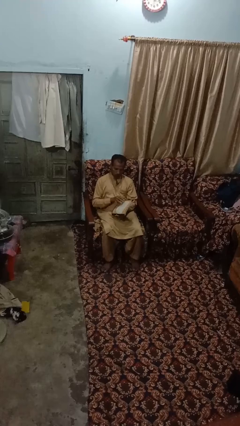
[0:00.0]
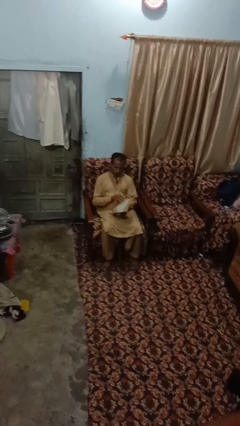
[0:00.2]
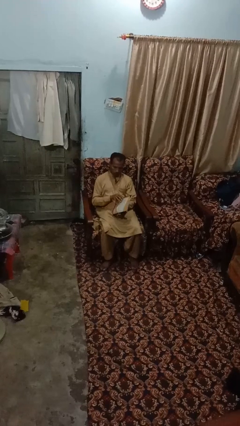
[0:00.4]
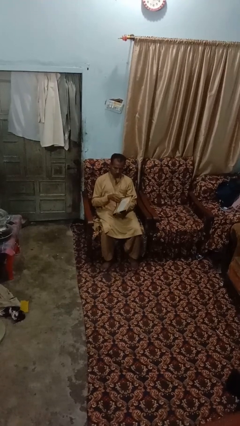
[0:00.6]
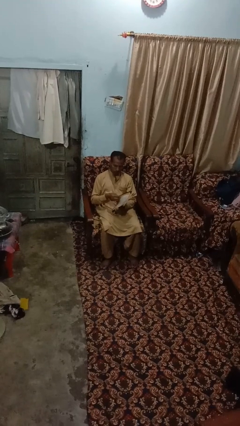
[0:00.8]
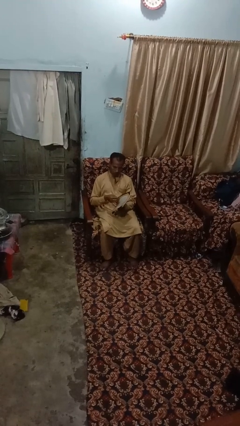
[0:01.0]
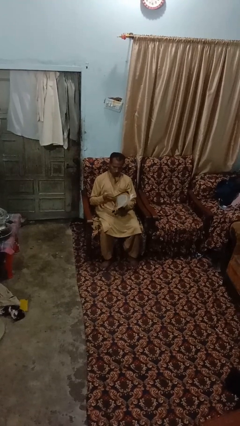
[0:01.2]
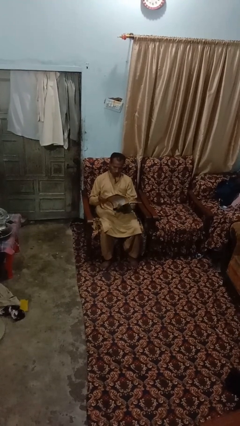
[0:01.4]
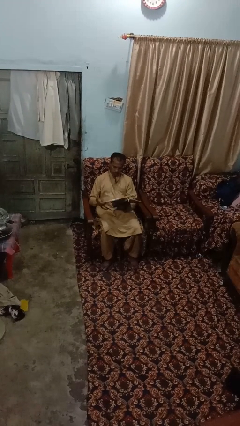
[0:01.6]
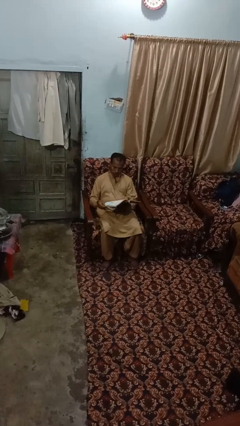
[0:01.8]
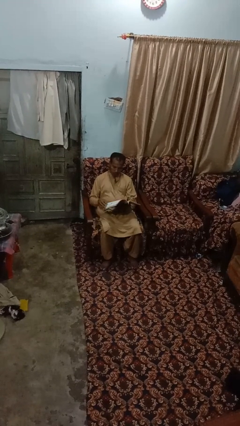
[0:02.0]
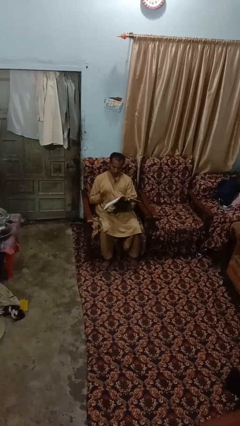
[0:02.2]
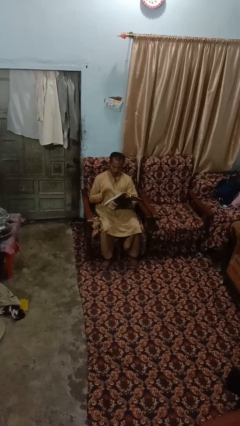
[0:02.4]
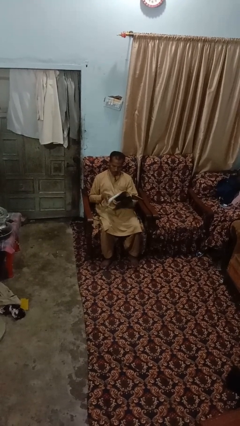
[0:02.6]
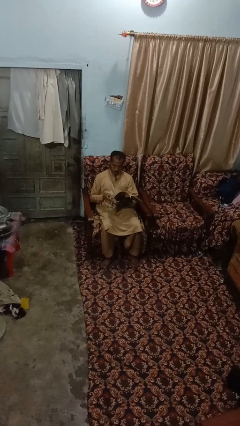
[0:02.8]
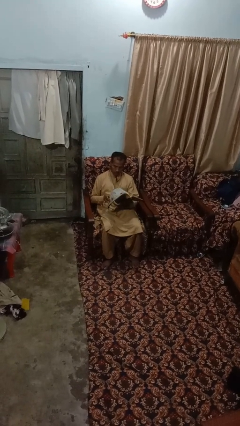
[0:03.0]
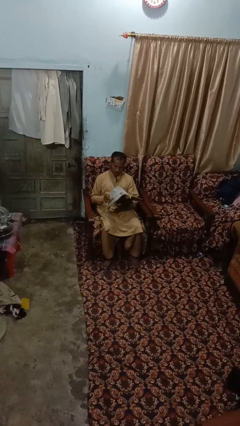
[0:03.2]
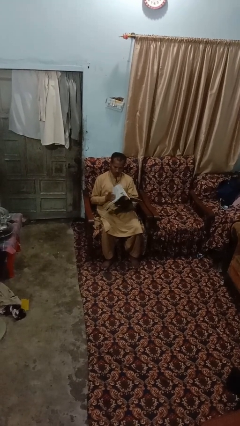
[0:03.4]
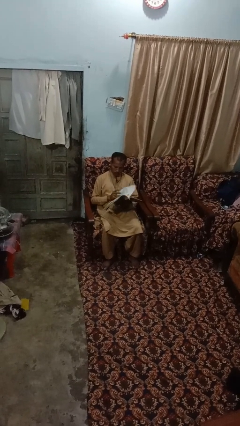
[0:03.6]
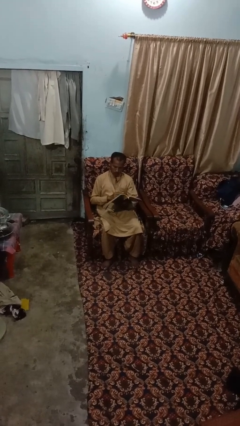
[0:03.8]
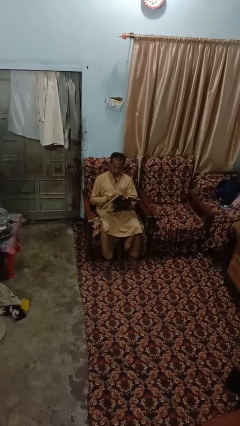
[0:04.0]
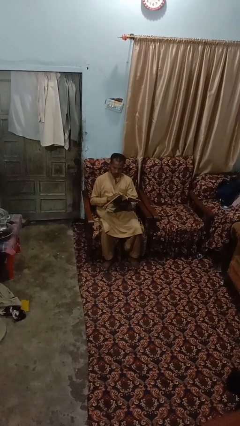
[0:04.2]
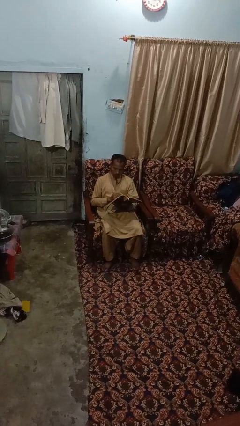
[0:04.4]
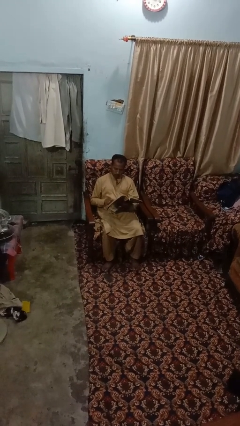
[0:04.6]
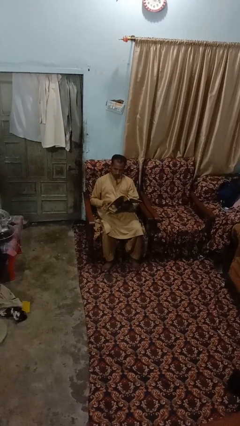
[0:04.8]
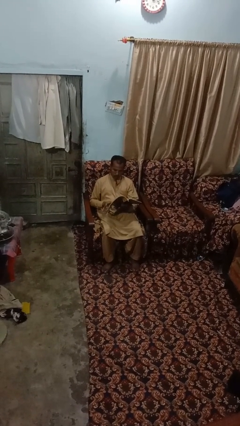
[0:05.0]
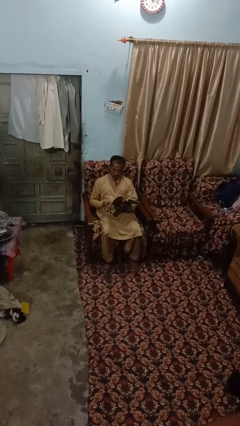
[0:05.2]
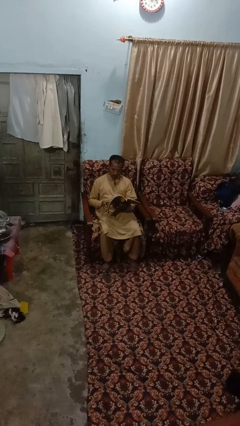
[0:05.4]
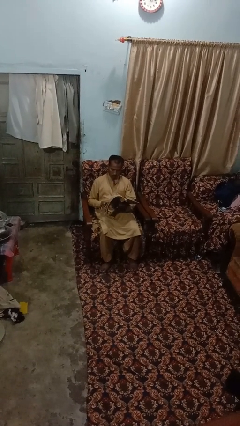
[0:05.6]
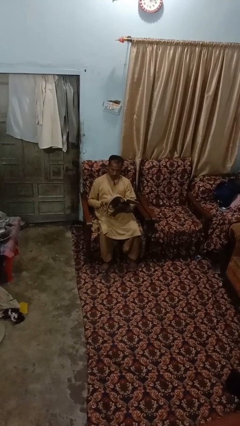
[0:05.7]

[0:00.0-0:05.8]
person reads book

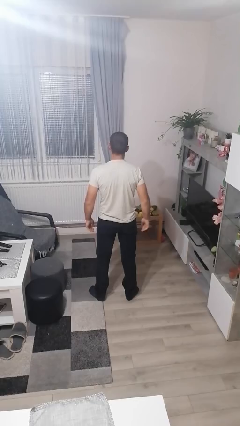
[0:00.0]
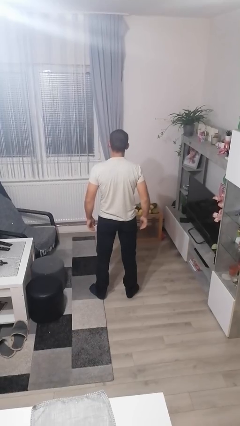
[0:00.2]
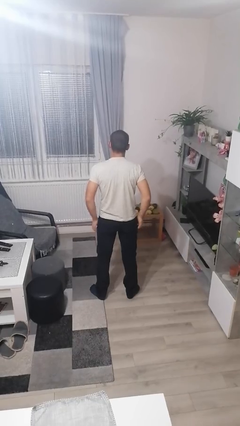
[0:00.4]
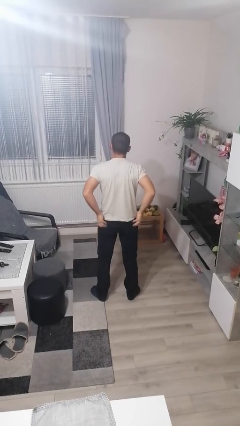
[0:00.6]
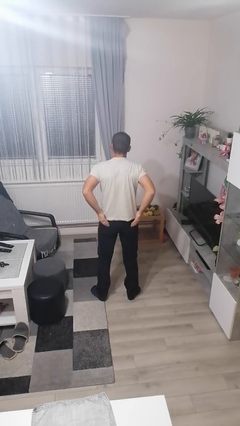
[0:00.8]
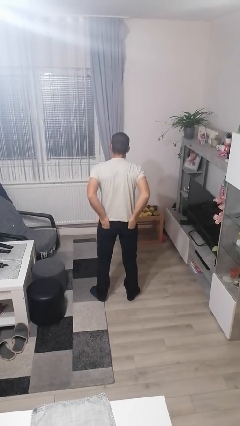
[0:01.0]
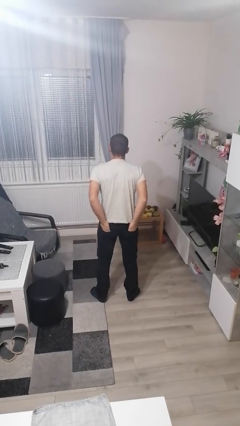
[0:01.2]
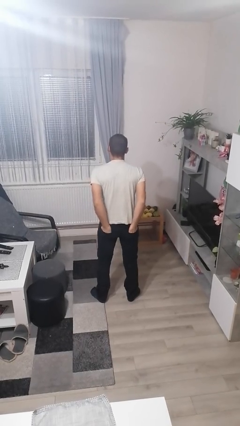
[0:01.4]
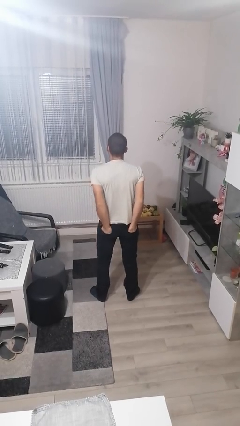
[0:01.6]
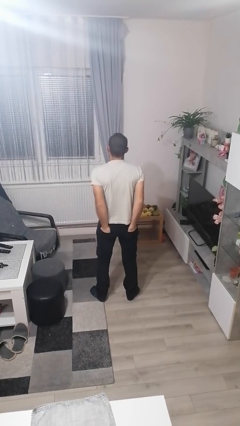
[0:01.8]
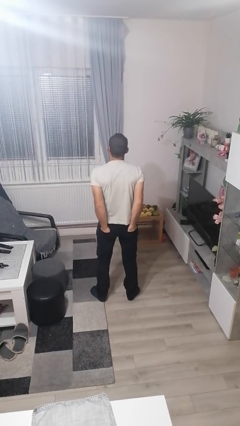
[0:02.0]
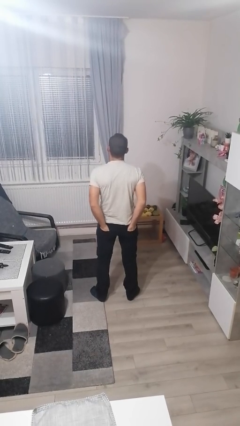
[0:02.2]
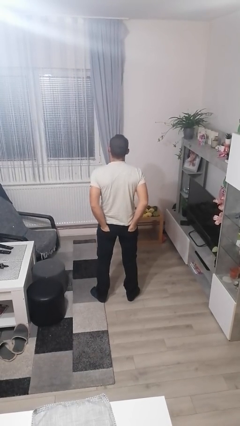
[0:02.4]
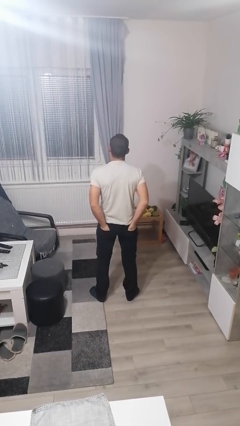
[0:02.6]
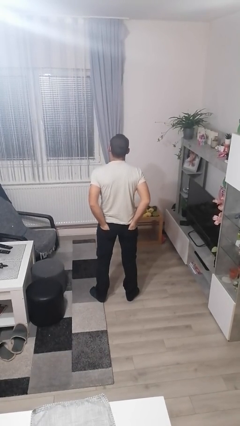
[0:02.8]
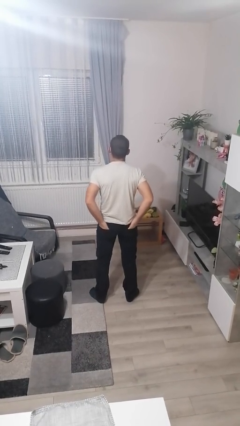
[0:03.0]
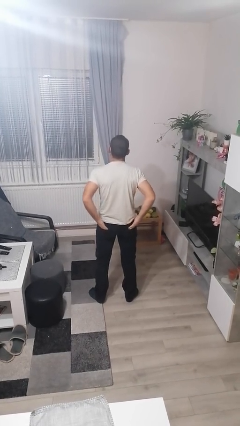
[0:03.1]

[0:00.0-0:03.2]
person puts hands in back pockets

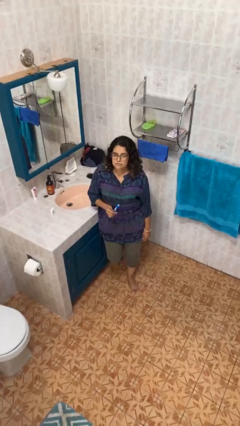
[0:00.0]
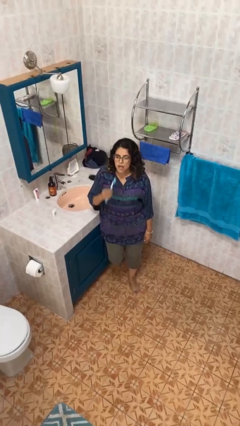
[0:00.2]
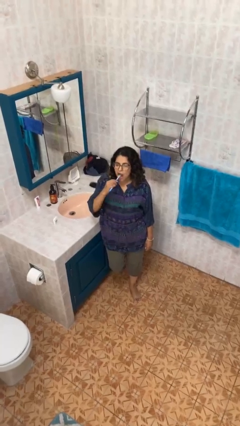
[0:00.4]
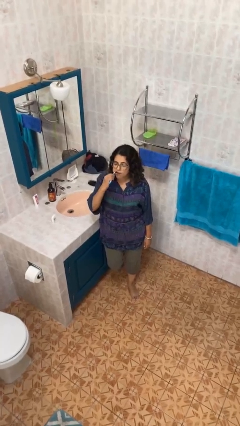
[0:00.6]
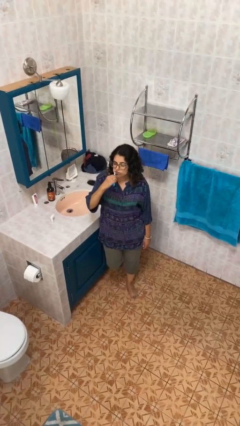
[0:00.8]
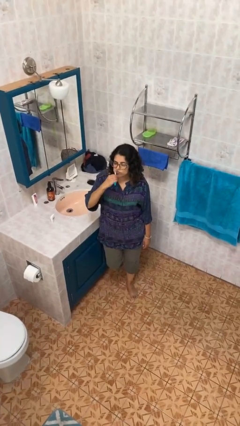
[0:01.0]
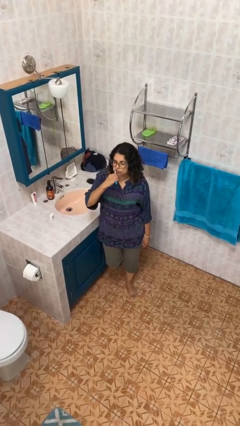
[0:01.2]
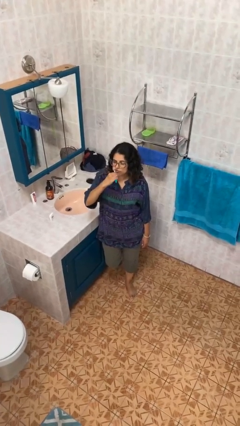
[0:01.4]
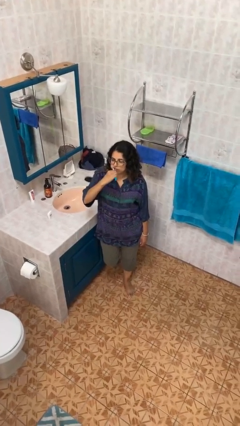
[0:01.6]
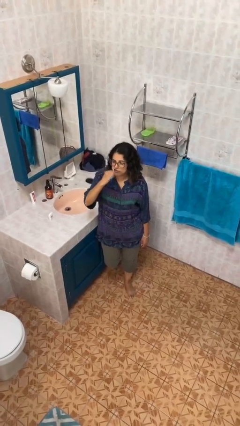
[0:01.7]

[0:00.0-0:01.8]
person brushes teeth

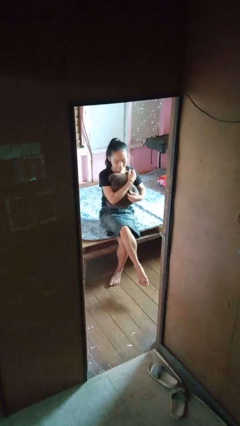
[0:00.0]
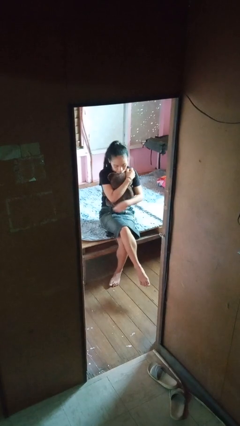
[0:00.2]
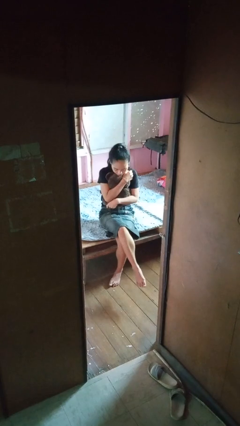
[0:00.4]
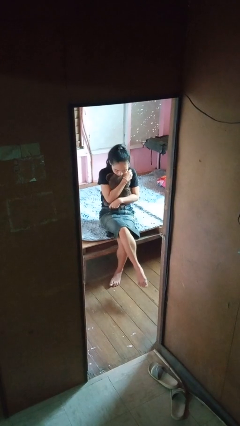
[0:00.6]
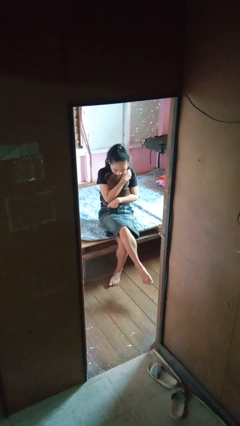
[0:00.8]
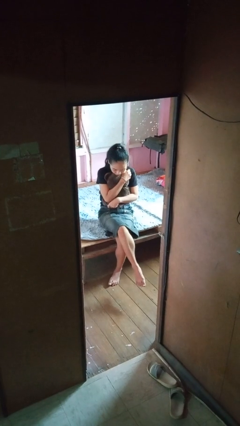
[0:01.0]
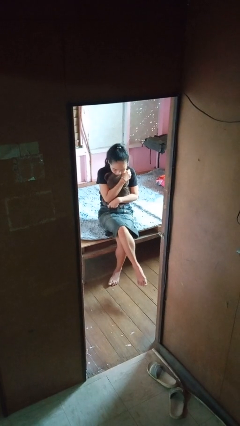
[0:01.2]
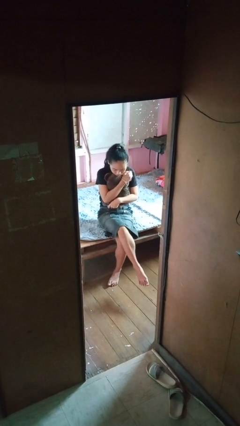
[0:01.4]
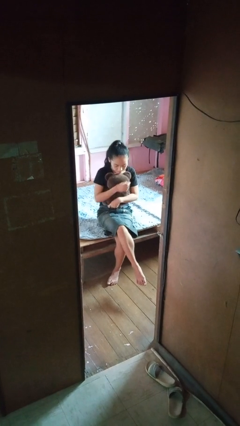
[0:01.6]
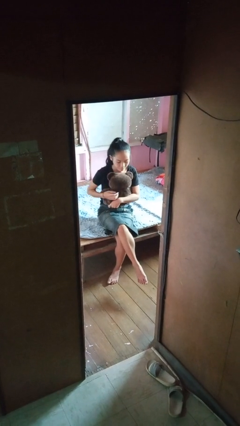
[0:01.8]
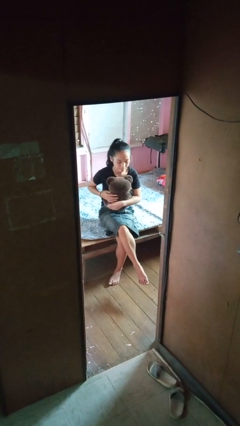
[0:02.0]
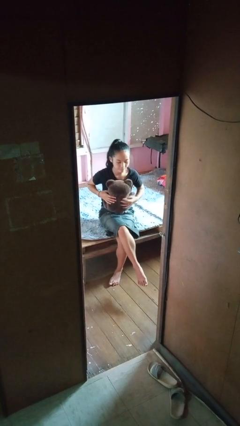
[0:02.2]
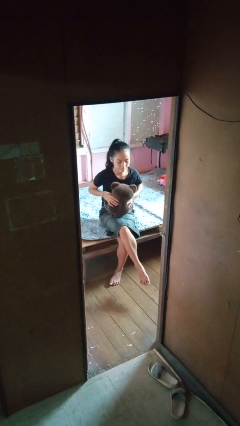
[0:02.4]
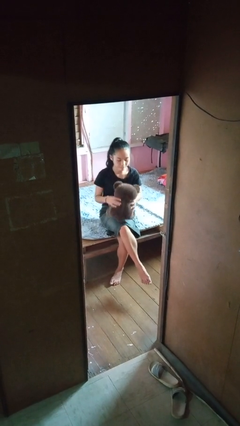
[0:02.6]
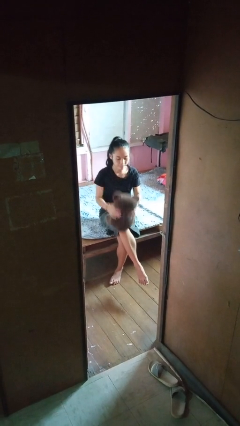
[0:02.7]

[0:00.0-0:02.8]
person hugs stuffed animal

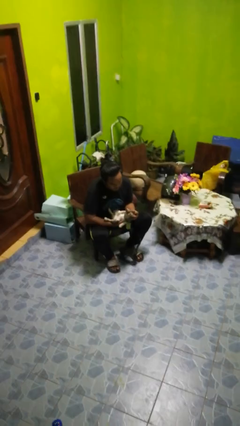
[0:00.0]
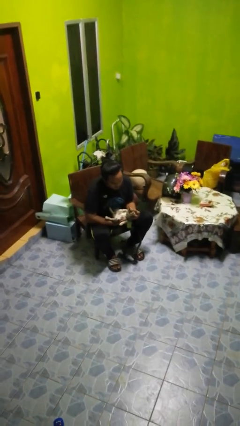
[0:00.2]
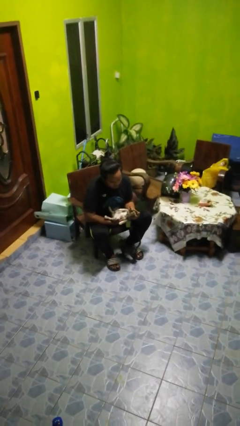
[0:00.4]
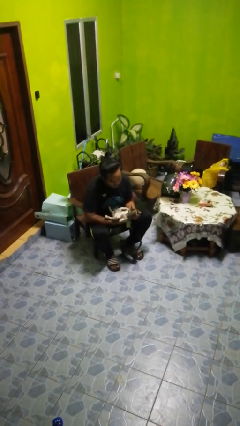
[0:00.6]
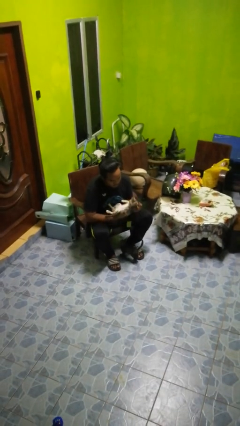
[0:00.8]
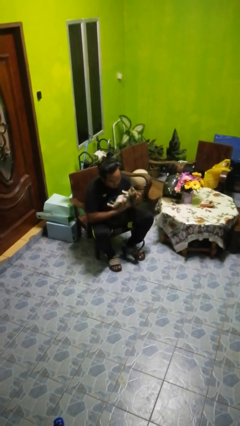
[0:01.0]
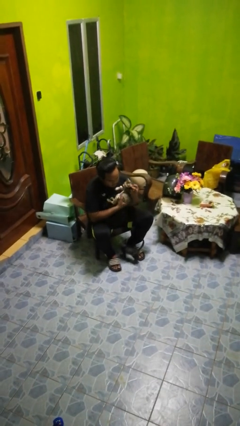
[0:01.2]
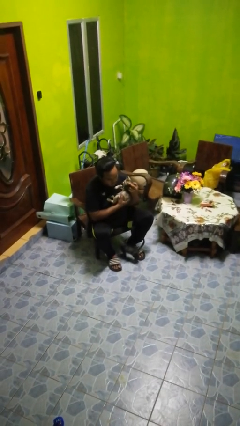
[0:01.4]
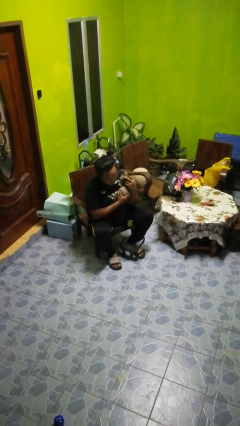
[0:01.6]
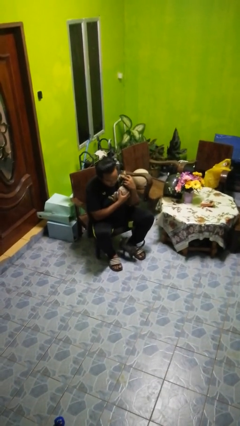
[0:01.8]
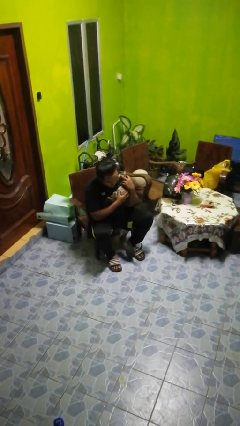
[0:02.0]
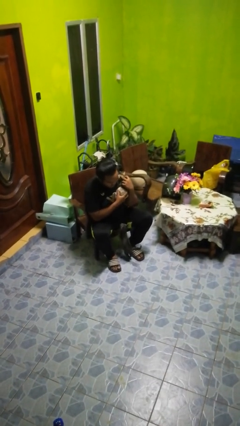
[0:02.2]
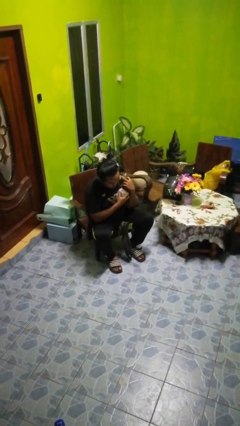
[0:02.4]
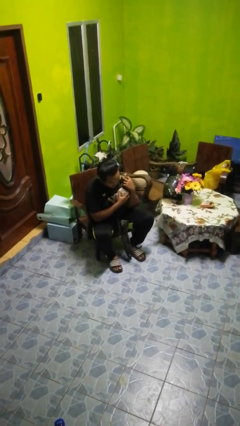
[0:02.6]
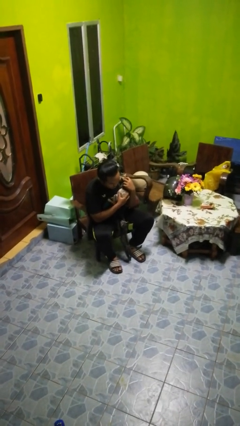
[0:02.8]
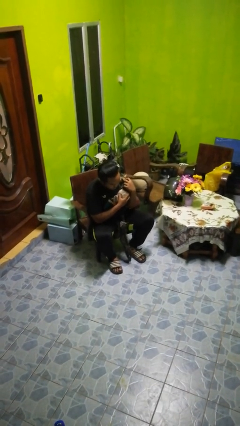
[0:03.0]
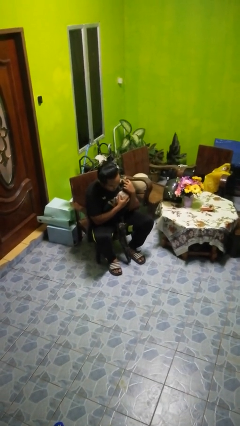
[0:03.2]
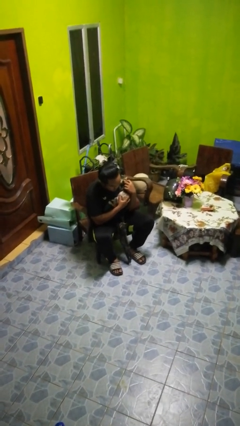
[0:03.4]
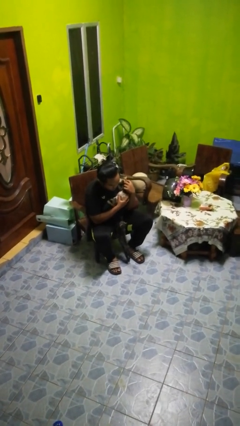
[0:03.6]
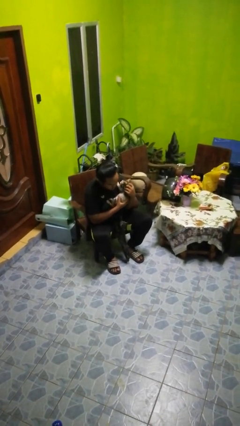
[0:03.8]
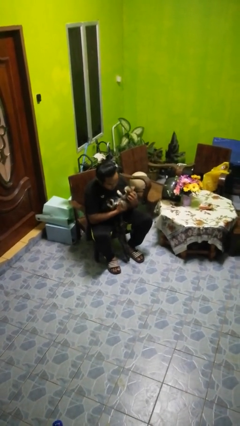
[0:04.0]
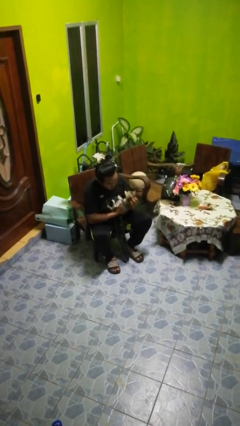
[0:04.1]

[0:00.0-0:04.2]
person hugs cat
